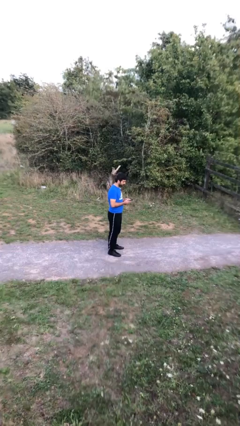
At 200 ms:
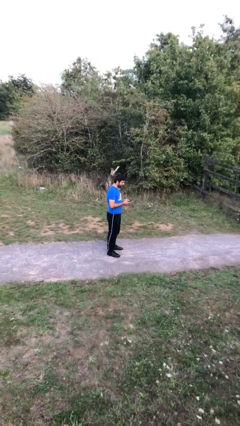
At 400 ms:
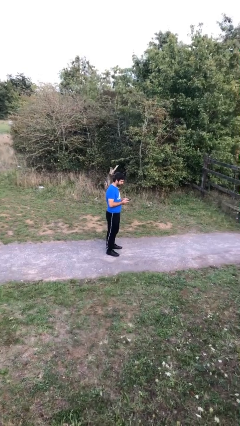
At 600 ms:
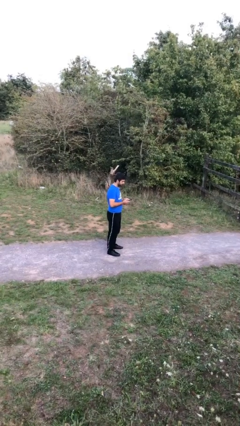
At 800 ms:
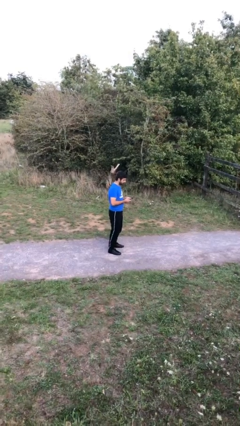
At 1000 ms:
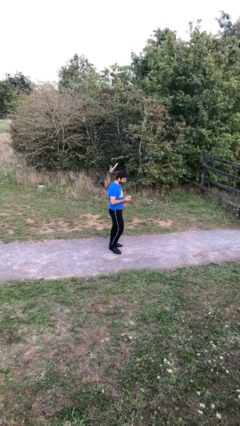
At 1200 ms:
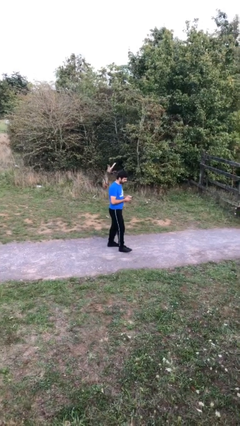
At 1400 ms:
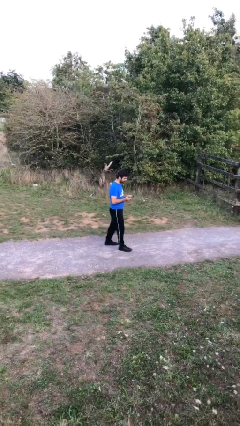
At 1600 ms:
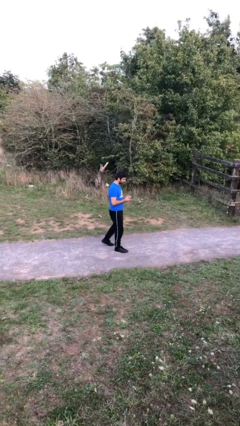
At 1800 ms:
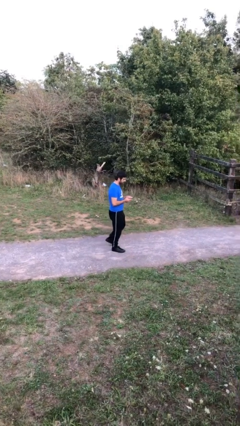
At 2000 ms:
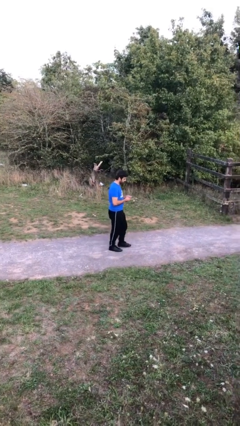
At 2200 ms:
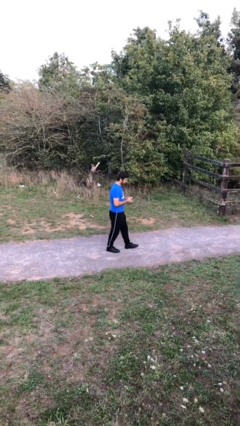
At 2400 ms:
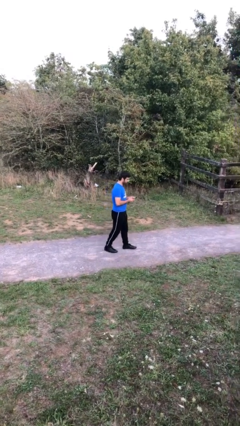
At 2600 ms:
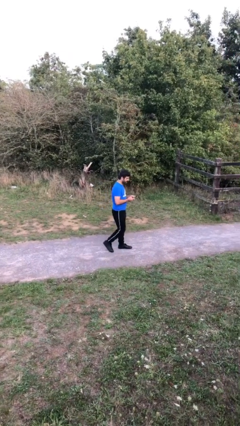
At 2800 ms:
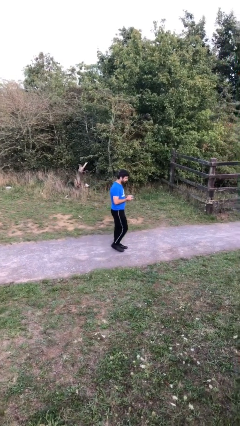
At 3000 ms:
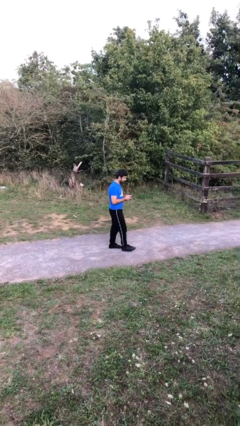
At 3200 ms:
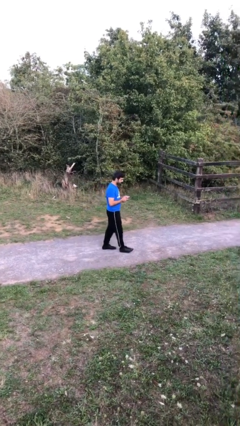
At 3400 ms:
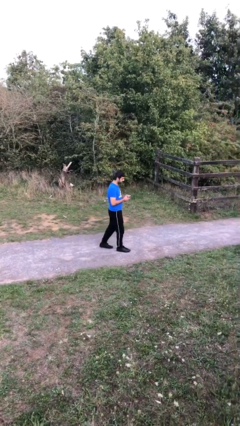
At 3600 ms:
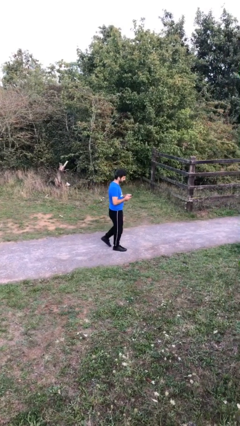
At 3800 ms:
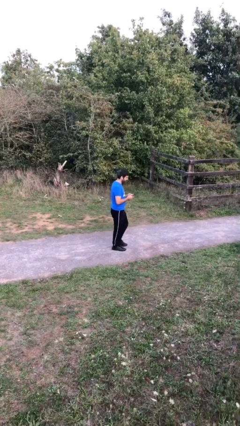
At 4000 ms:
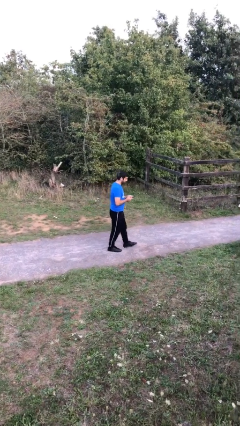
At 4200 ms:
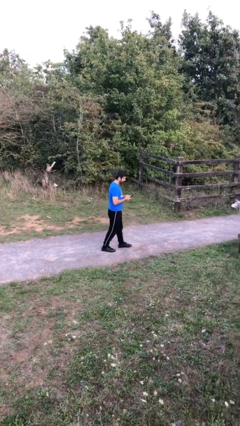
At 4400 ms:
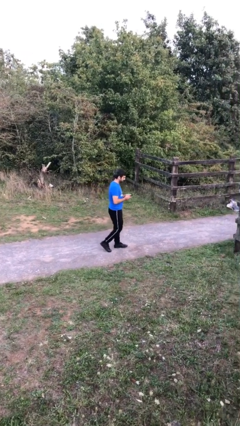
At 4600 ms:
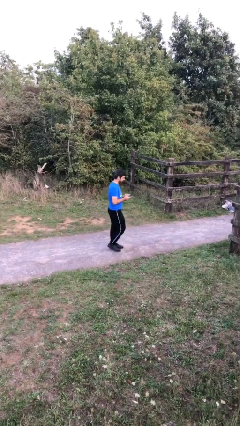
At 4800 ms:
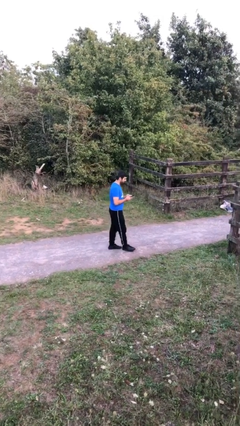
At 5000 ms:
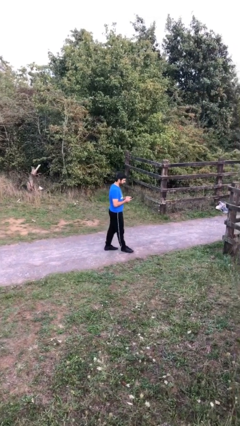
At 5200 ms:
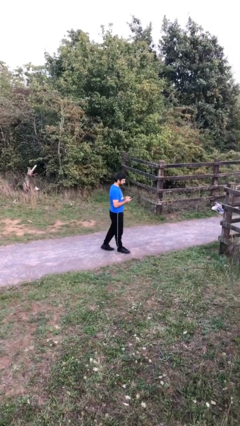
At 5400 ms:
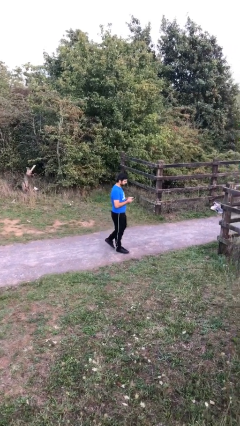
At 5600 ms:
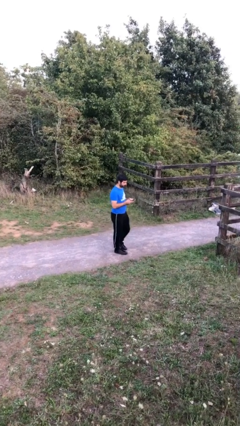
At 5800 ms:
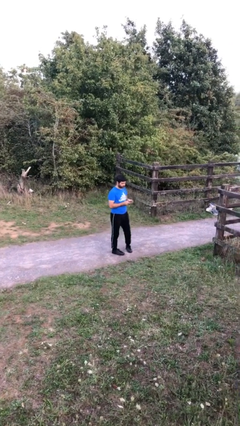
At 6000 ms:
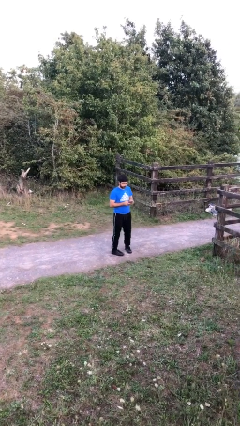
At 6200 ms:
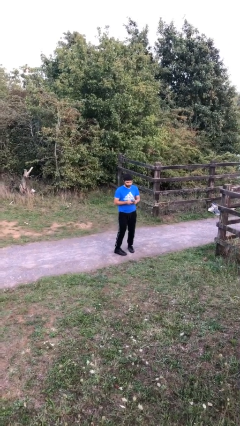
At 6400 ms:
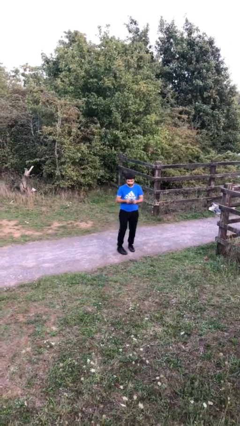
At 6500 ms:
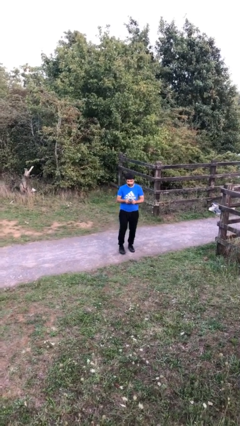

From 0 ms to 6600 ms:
person texts on phone

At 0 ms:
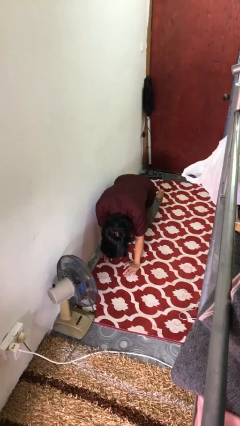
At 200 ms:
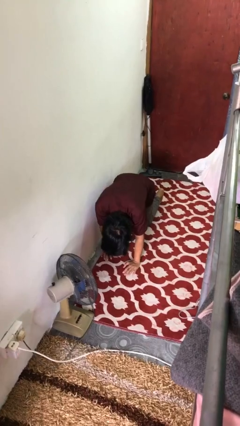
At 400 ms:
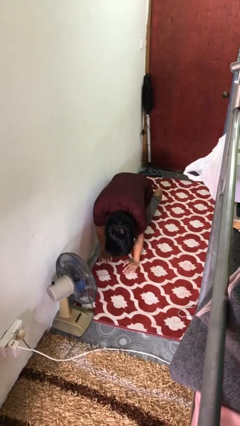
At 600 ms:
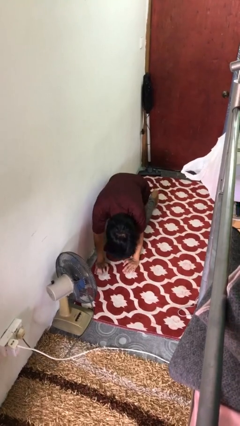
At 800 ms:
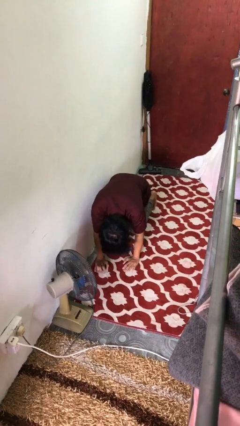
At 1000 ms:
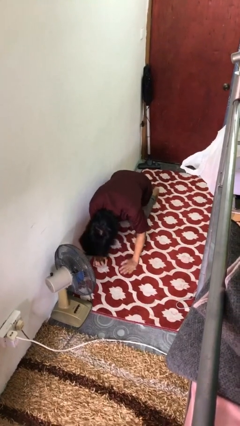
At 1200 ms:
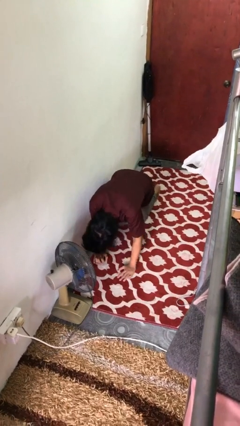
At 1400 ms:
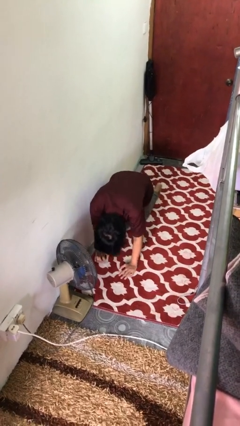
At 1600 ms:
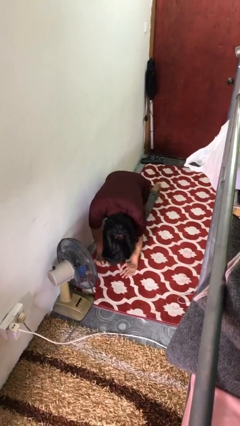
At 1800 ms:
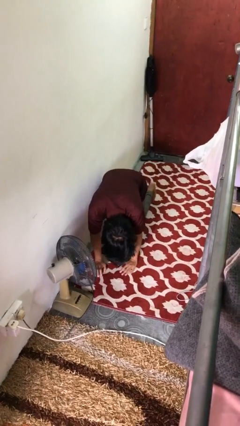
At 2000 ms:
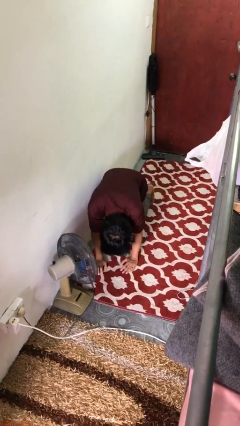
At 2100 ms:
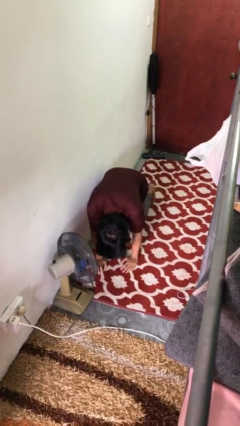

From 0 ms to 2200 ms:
person crawls

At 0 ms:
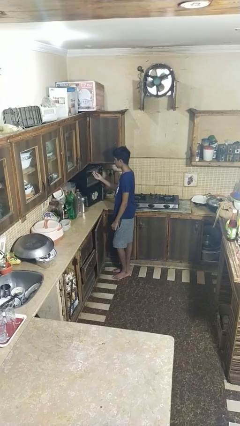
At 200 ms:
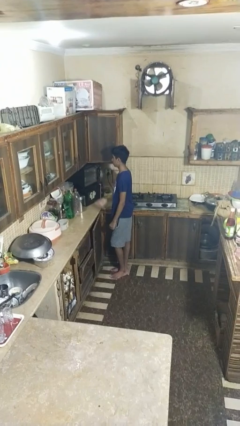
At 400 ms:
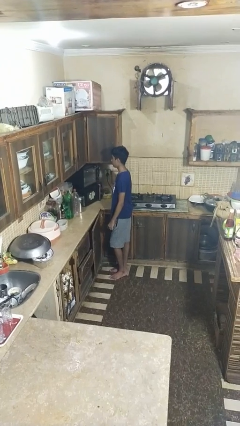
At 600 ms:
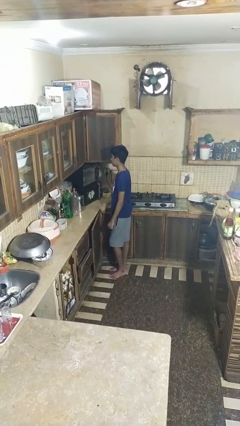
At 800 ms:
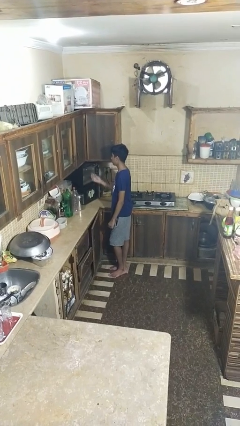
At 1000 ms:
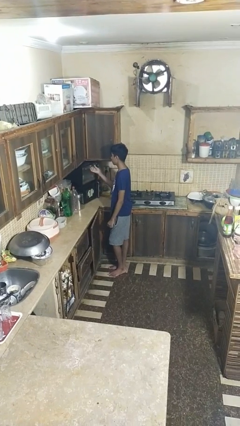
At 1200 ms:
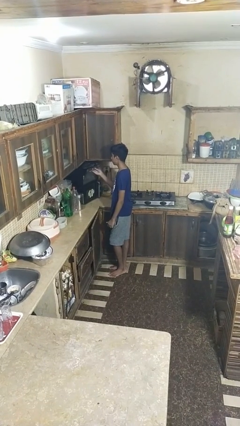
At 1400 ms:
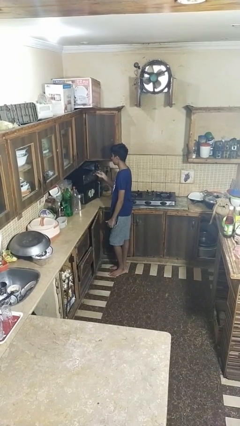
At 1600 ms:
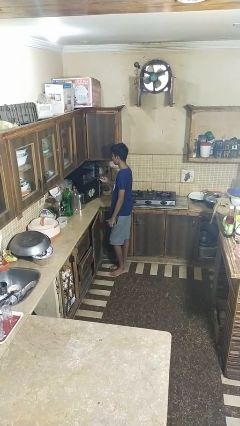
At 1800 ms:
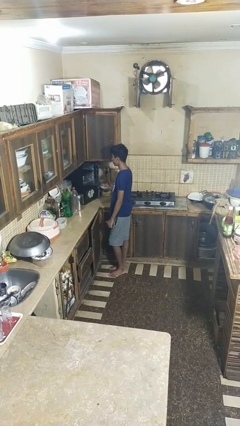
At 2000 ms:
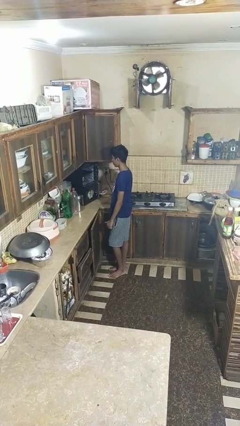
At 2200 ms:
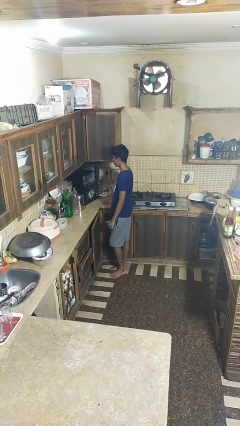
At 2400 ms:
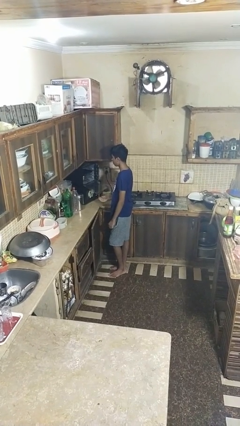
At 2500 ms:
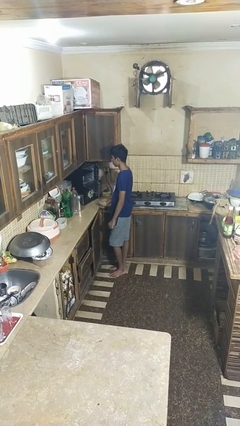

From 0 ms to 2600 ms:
person opens oven door

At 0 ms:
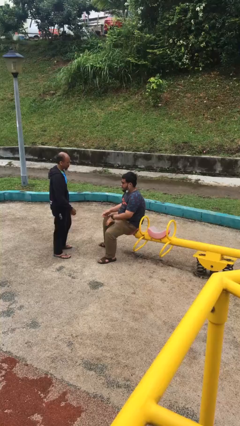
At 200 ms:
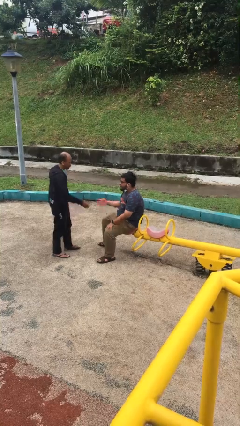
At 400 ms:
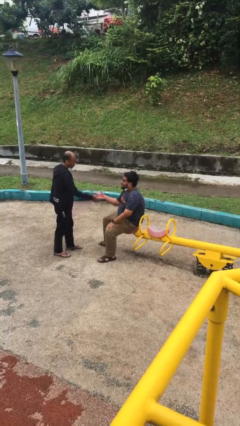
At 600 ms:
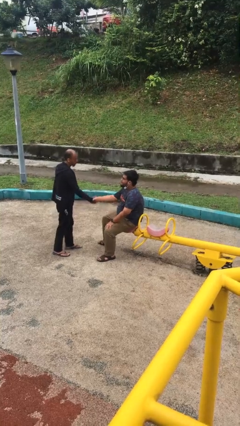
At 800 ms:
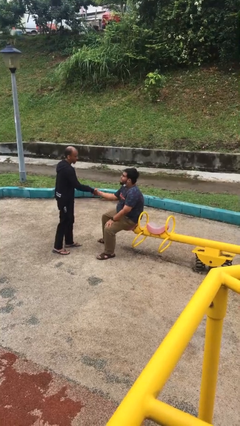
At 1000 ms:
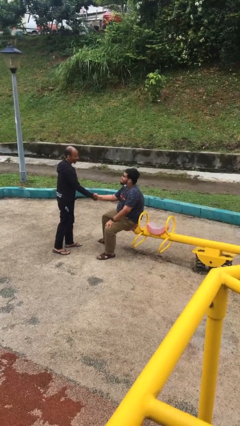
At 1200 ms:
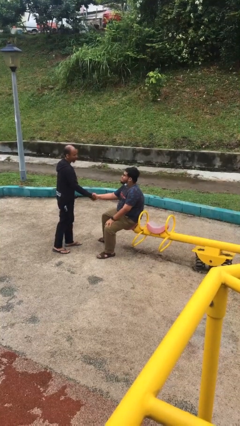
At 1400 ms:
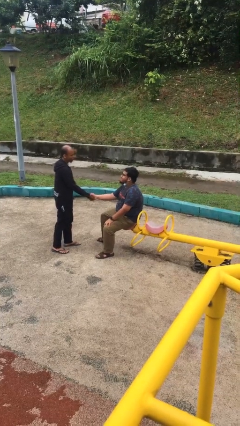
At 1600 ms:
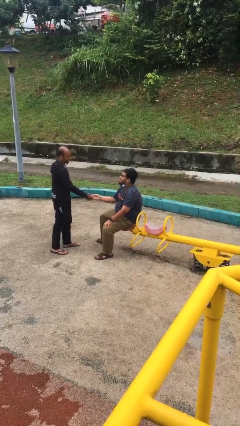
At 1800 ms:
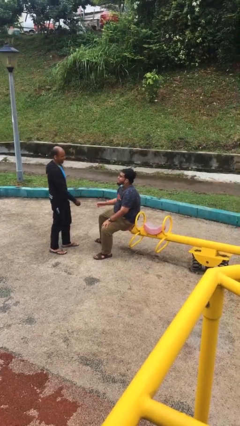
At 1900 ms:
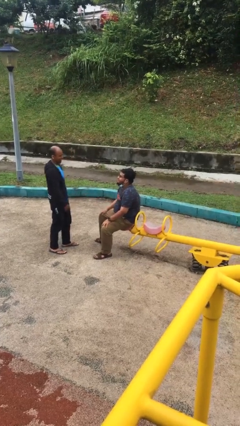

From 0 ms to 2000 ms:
person shakes hand

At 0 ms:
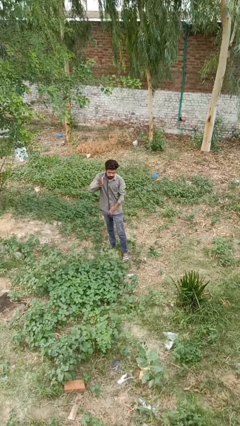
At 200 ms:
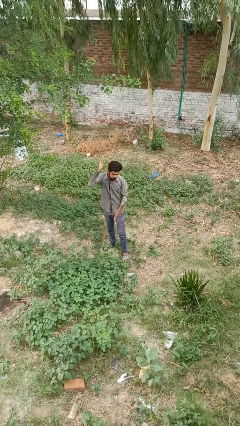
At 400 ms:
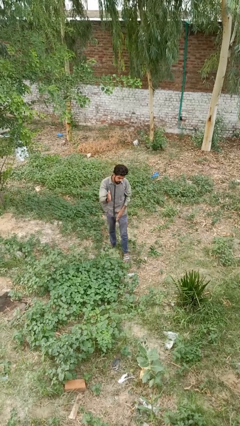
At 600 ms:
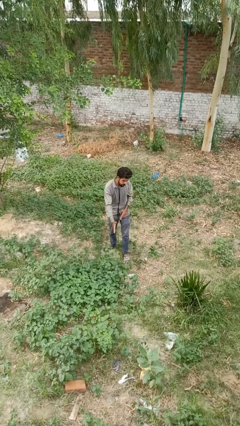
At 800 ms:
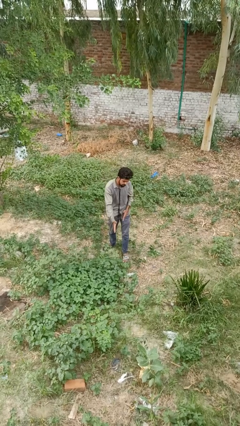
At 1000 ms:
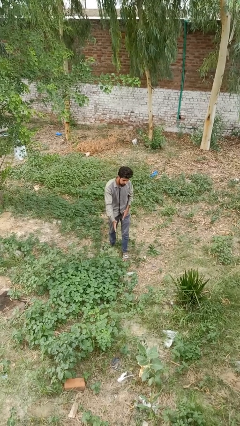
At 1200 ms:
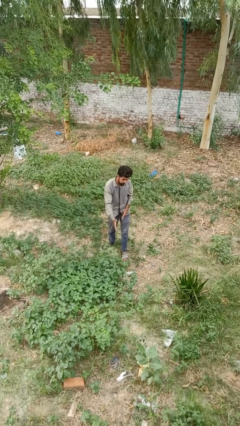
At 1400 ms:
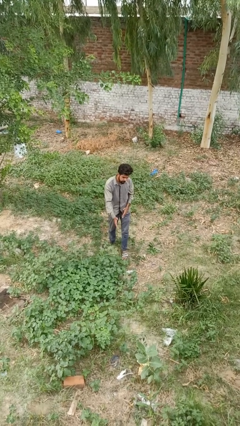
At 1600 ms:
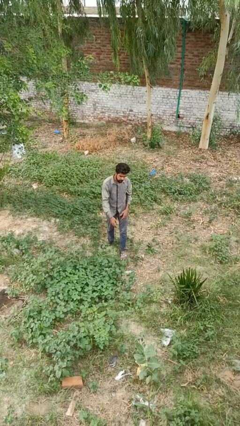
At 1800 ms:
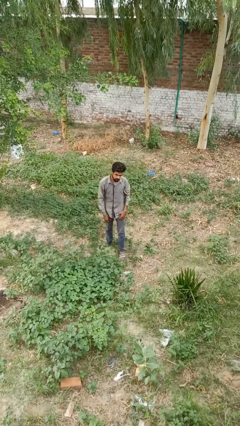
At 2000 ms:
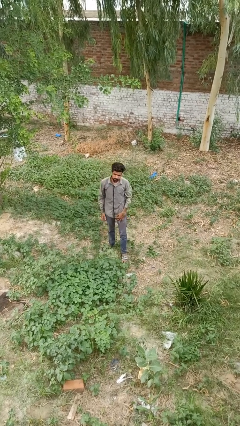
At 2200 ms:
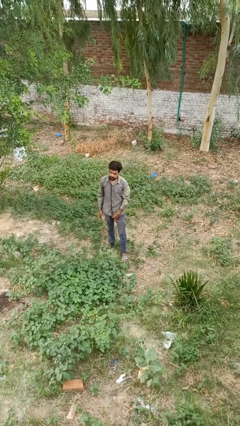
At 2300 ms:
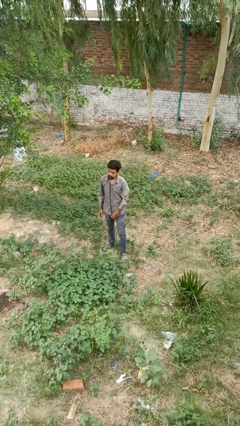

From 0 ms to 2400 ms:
person karate chop

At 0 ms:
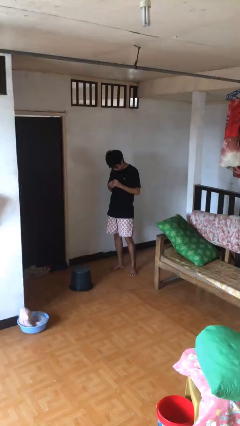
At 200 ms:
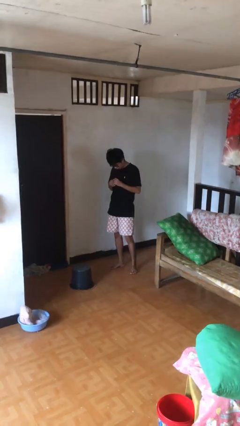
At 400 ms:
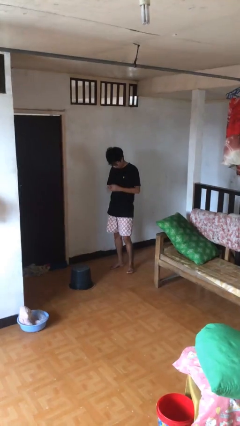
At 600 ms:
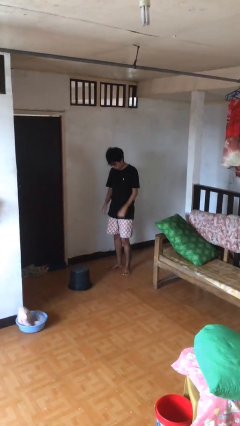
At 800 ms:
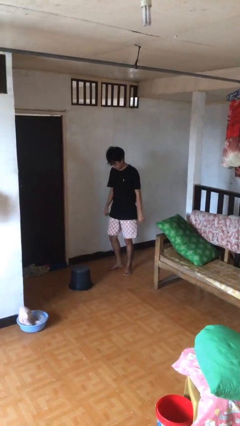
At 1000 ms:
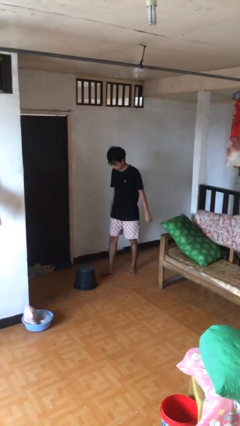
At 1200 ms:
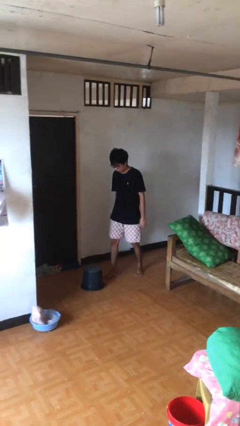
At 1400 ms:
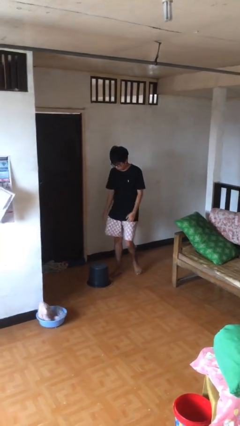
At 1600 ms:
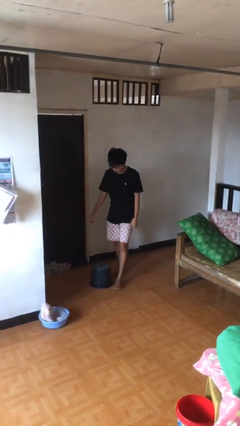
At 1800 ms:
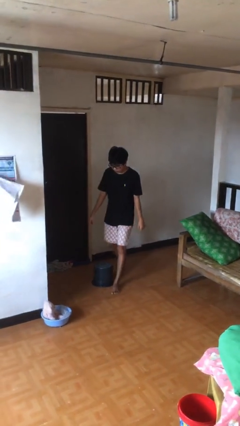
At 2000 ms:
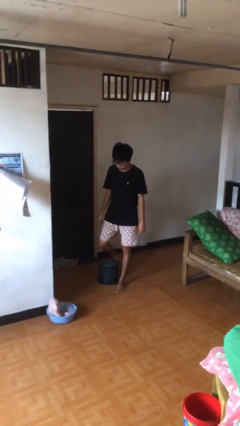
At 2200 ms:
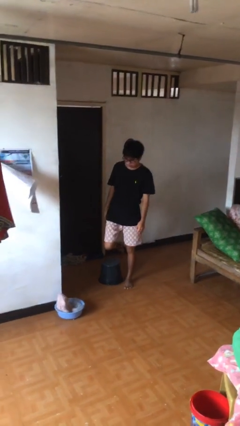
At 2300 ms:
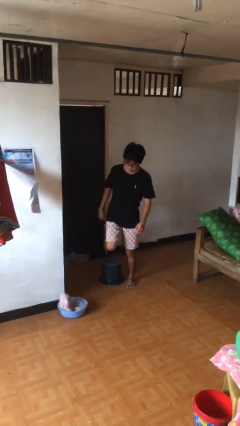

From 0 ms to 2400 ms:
person trips on object on floor
